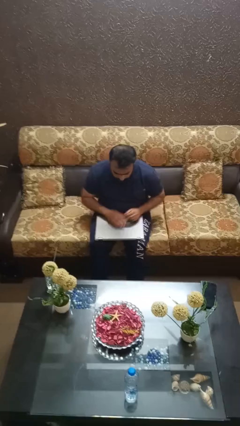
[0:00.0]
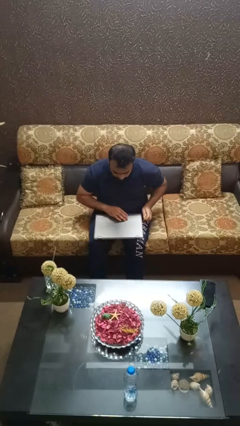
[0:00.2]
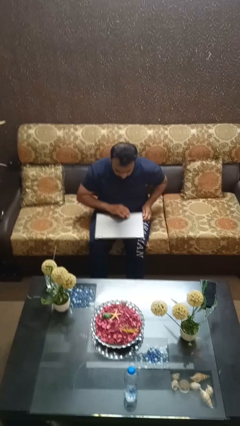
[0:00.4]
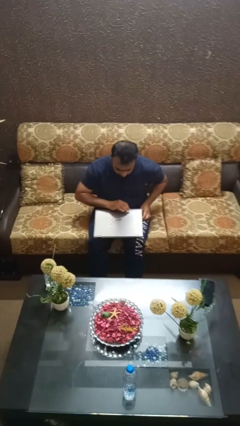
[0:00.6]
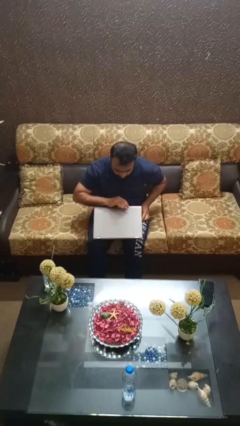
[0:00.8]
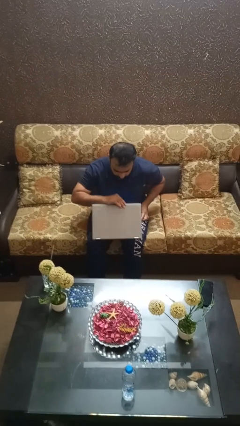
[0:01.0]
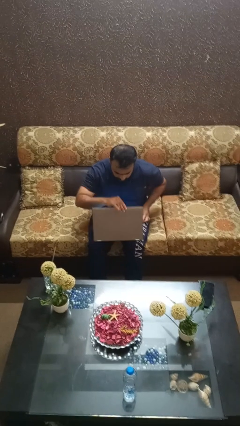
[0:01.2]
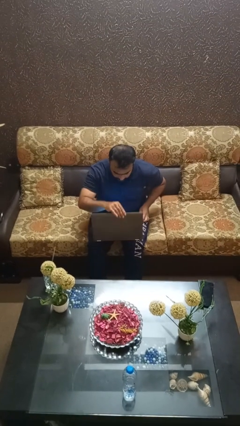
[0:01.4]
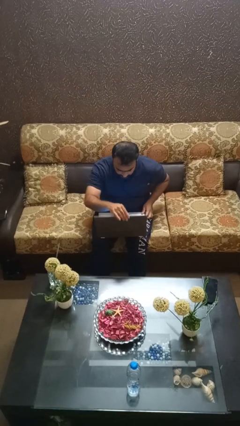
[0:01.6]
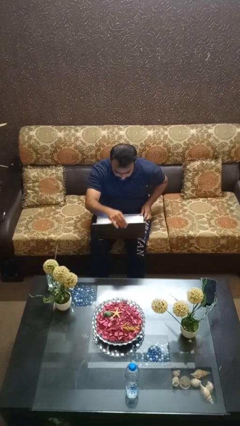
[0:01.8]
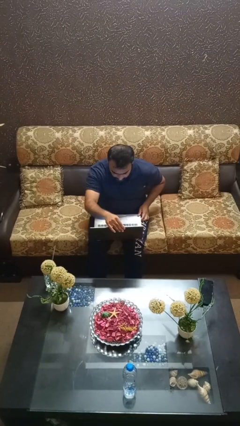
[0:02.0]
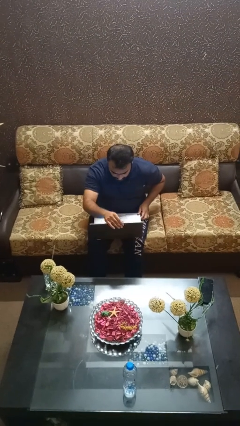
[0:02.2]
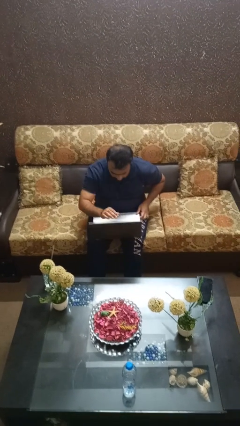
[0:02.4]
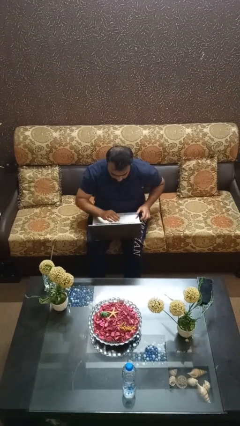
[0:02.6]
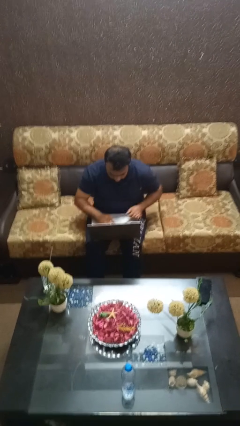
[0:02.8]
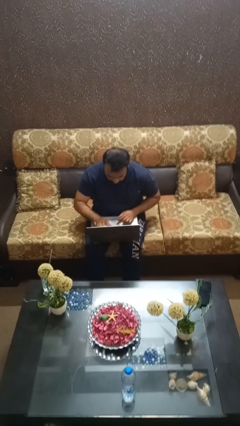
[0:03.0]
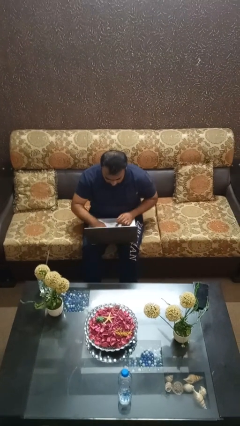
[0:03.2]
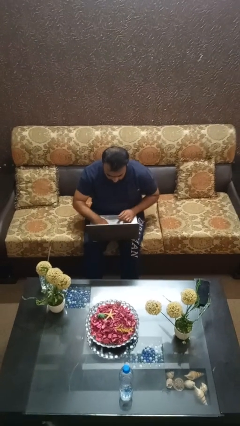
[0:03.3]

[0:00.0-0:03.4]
person opens laptop

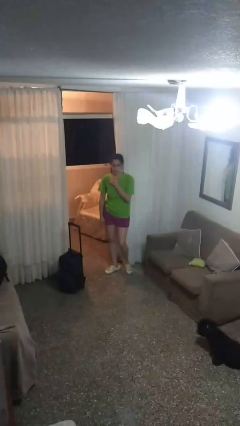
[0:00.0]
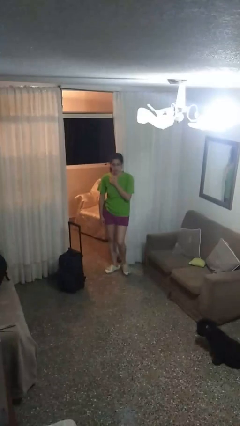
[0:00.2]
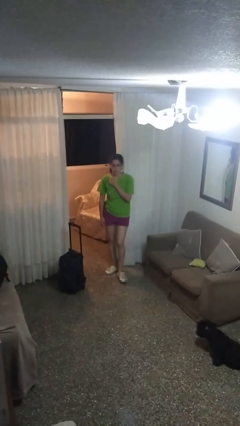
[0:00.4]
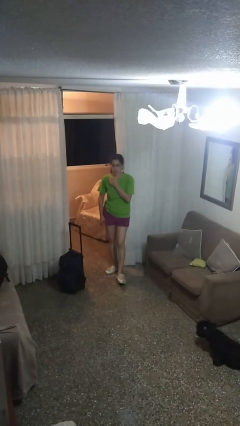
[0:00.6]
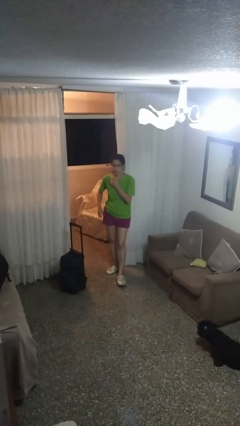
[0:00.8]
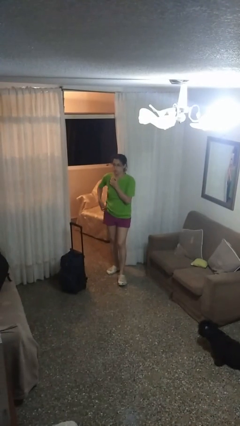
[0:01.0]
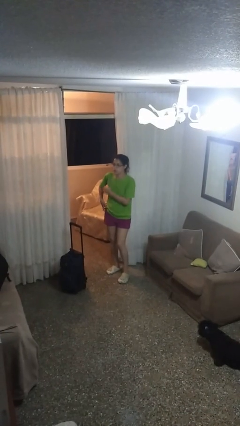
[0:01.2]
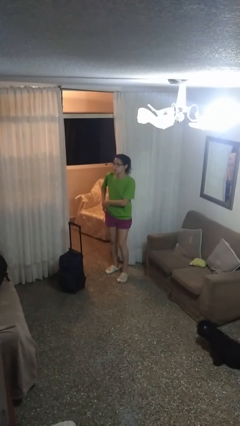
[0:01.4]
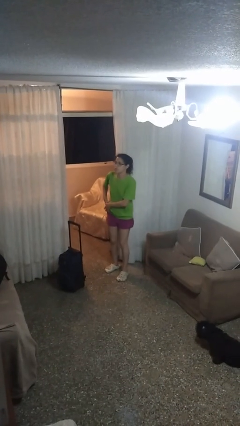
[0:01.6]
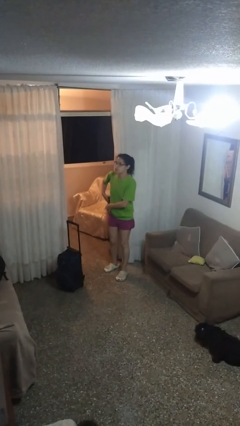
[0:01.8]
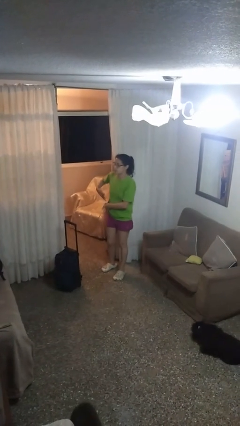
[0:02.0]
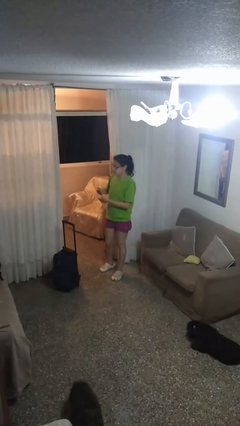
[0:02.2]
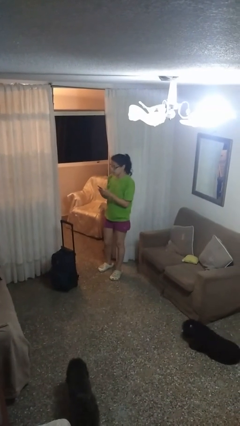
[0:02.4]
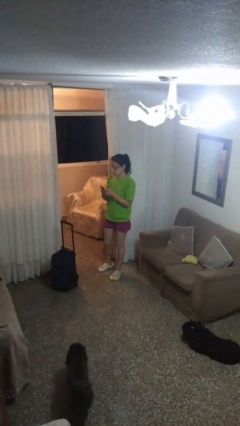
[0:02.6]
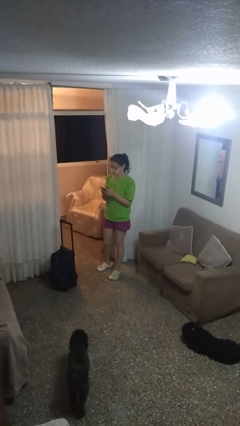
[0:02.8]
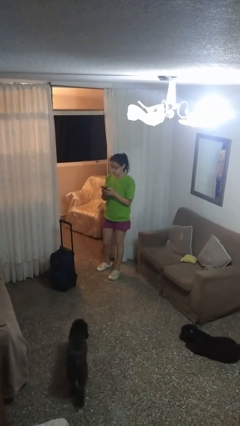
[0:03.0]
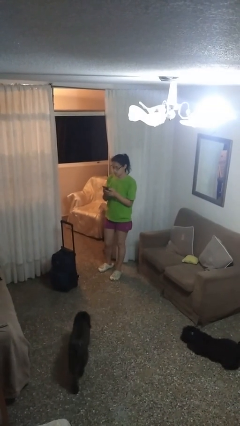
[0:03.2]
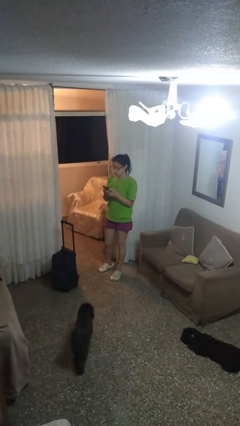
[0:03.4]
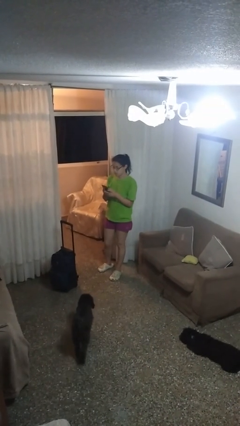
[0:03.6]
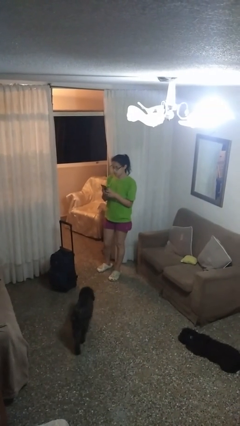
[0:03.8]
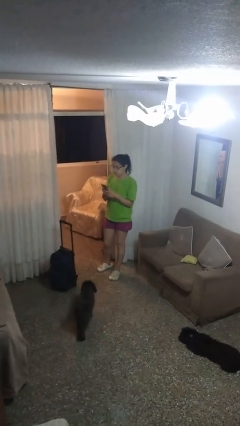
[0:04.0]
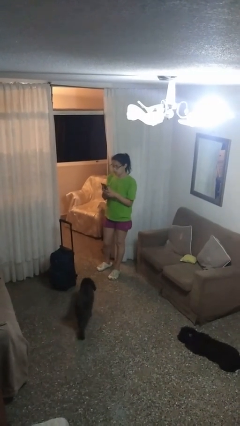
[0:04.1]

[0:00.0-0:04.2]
person takes phone from pocket

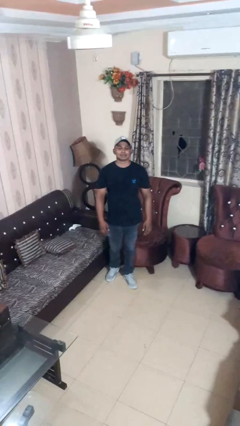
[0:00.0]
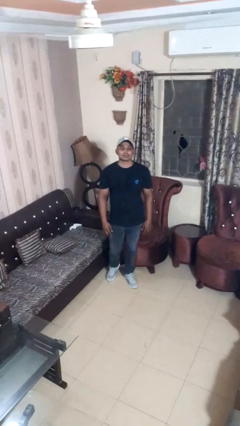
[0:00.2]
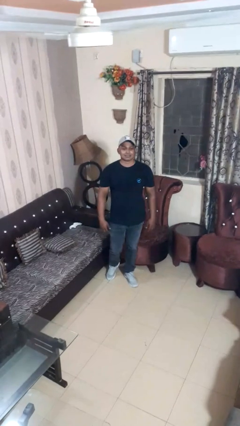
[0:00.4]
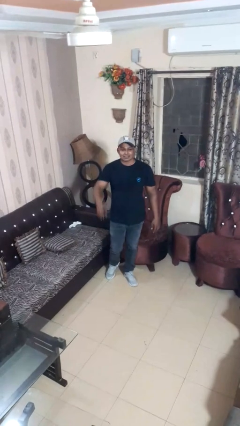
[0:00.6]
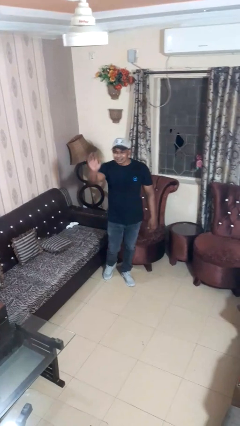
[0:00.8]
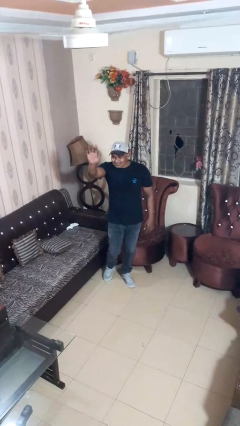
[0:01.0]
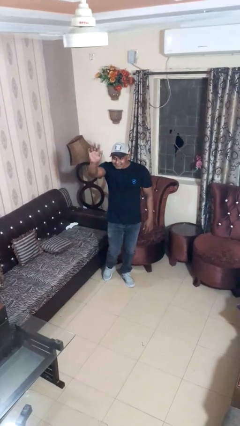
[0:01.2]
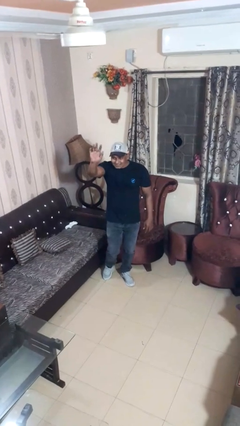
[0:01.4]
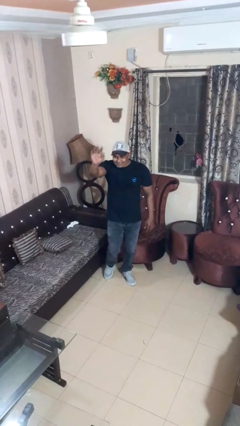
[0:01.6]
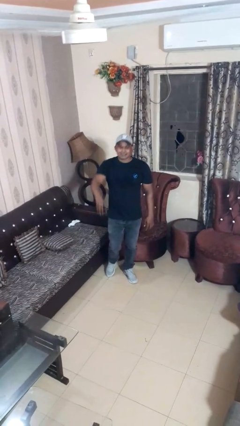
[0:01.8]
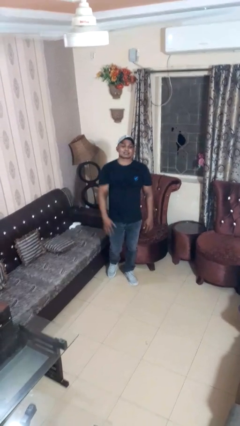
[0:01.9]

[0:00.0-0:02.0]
person waves at person

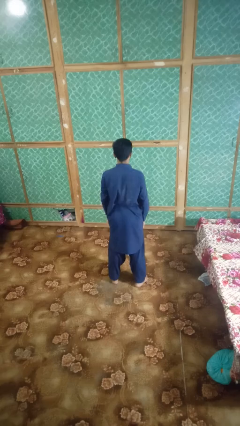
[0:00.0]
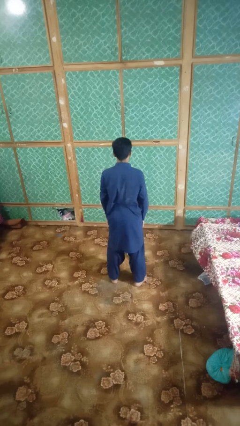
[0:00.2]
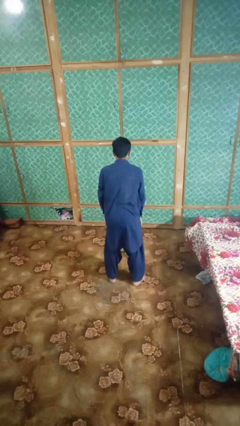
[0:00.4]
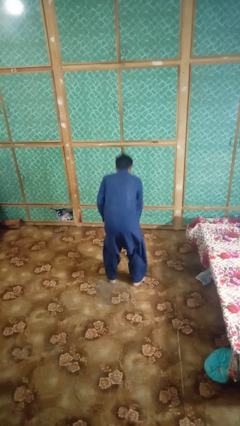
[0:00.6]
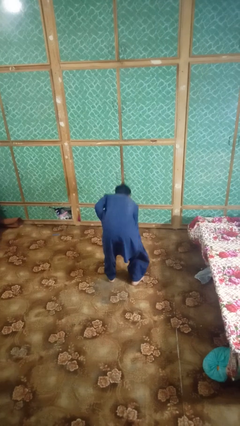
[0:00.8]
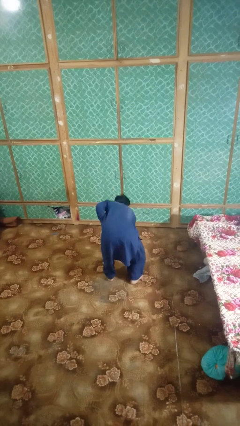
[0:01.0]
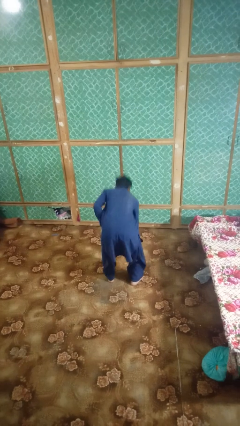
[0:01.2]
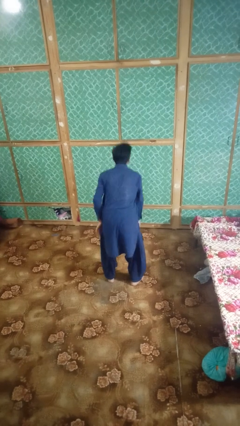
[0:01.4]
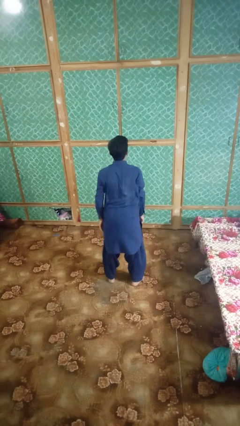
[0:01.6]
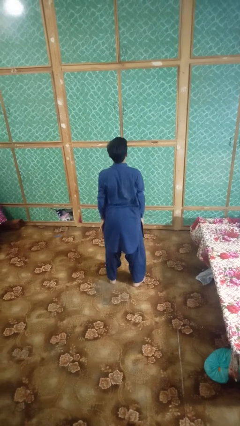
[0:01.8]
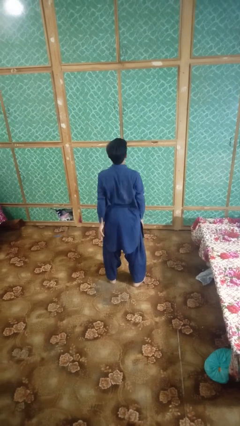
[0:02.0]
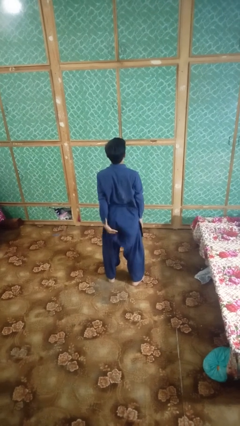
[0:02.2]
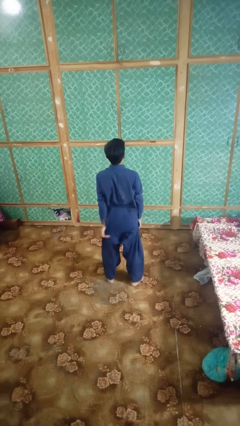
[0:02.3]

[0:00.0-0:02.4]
person picks up object from floor

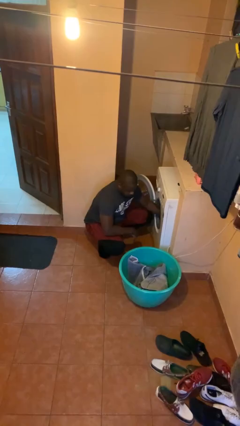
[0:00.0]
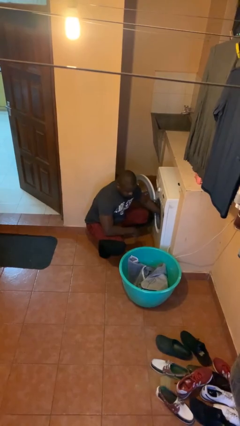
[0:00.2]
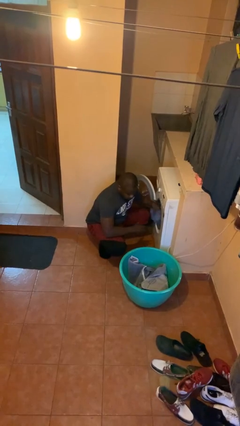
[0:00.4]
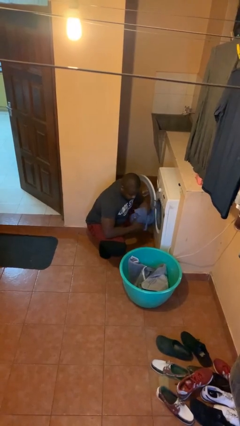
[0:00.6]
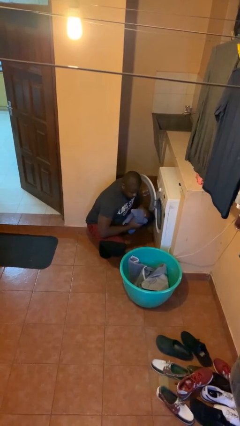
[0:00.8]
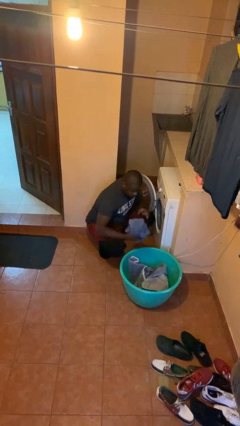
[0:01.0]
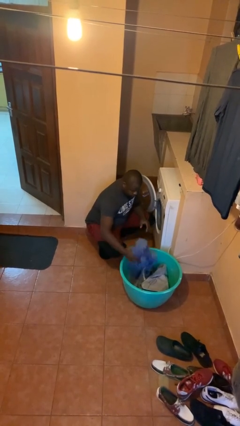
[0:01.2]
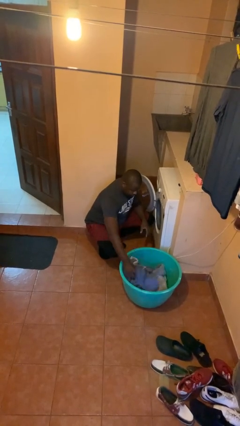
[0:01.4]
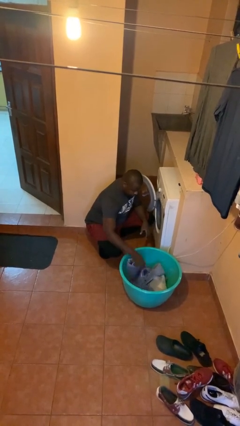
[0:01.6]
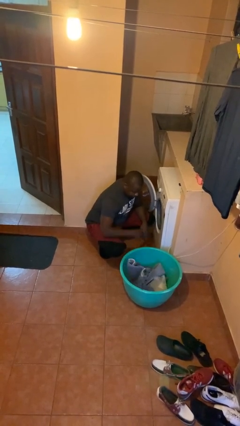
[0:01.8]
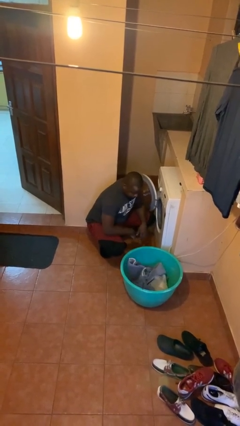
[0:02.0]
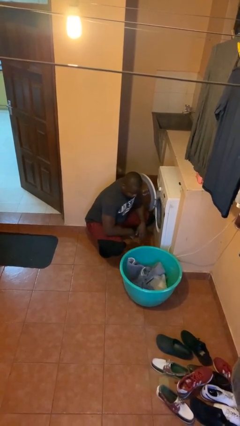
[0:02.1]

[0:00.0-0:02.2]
person unloads dryer

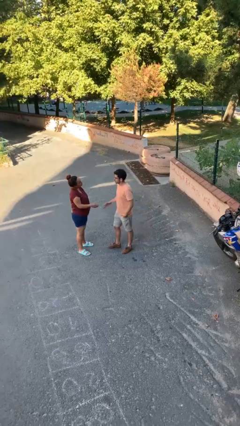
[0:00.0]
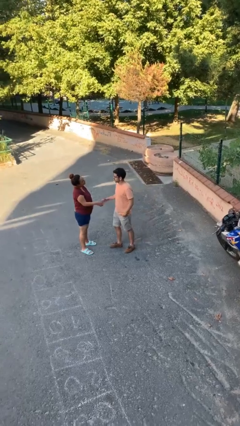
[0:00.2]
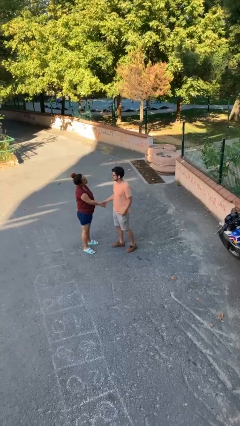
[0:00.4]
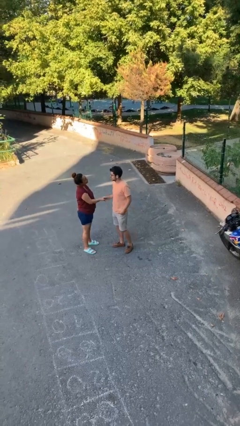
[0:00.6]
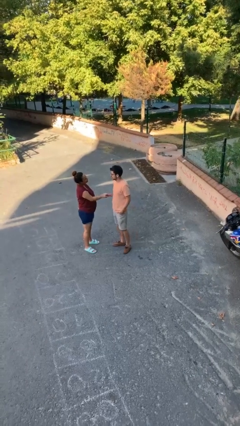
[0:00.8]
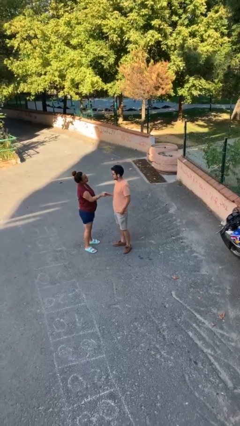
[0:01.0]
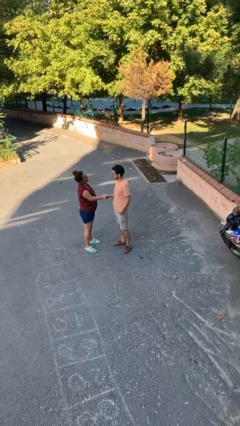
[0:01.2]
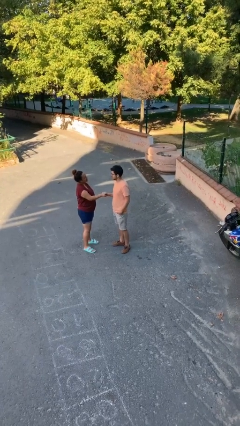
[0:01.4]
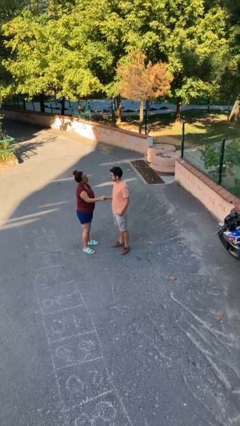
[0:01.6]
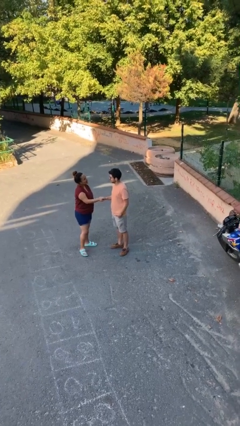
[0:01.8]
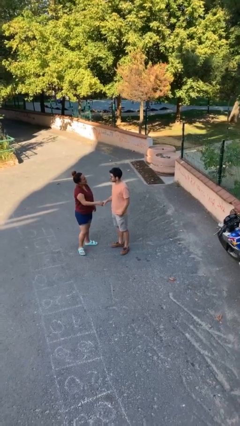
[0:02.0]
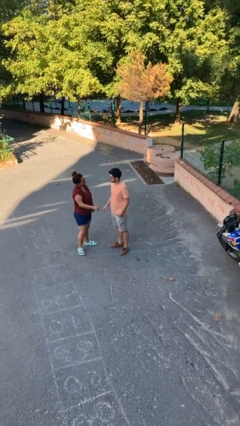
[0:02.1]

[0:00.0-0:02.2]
person shakes hand

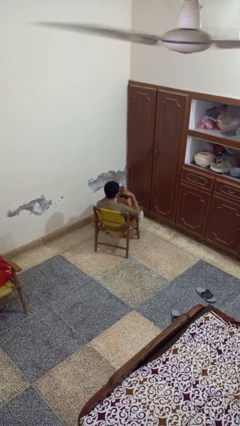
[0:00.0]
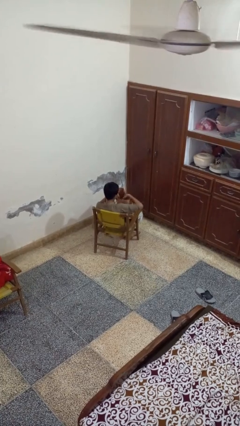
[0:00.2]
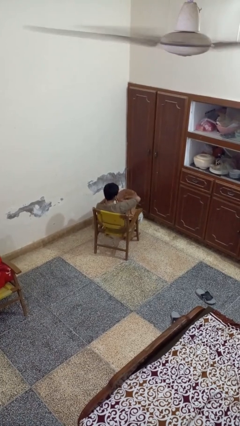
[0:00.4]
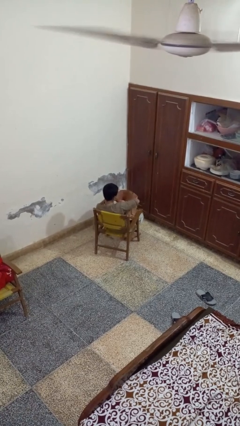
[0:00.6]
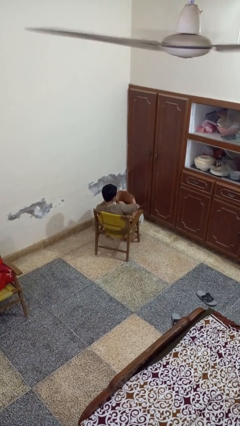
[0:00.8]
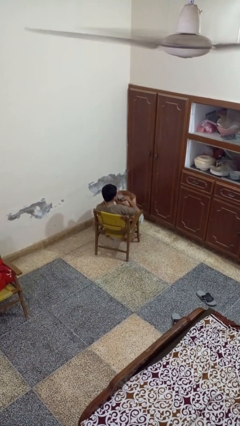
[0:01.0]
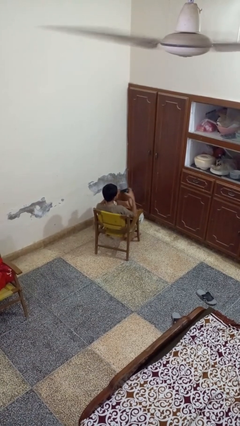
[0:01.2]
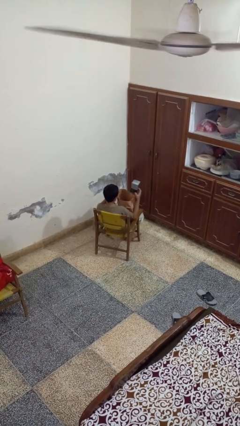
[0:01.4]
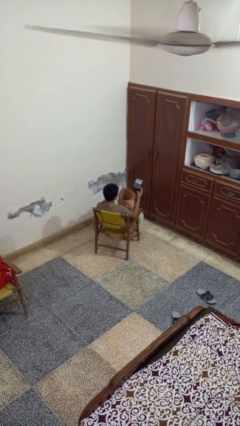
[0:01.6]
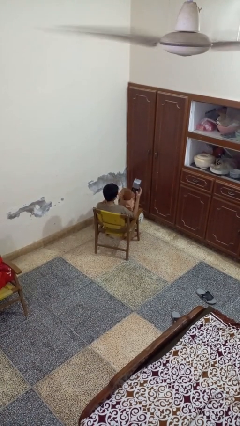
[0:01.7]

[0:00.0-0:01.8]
person takes object from bag
